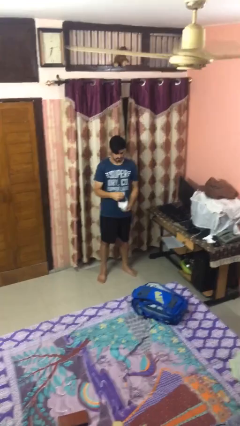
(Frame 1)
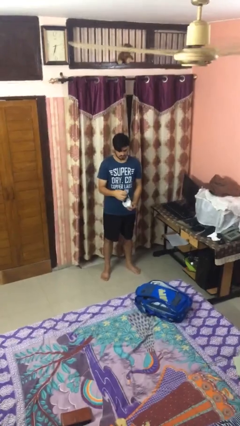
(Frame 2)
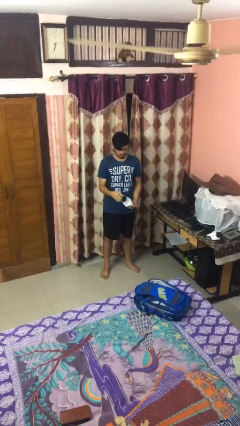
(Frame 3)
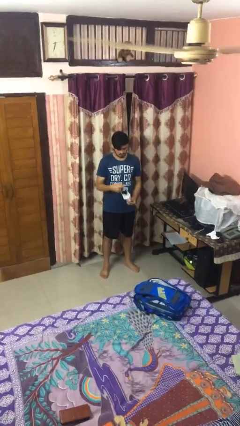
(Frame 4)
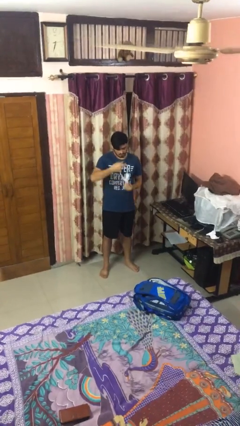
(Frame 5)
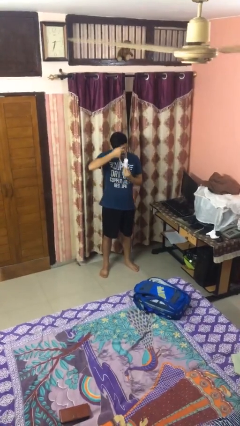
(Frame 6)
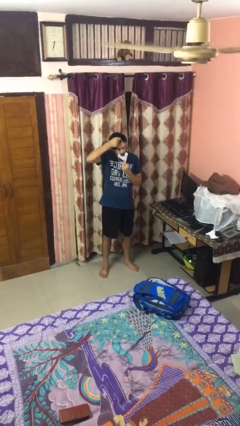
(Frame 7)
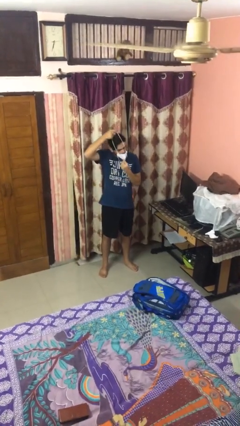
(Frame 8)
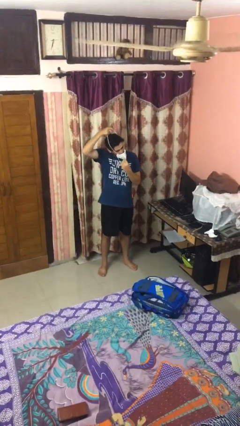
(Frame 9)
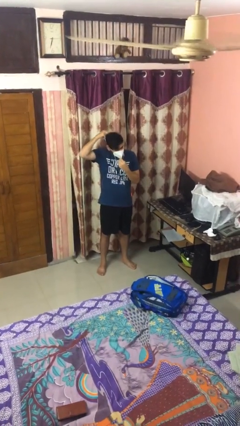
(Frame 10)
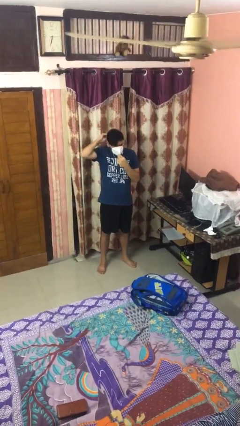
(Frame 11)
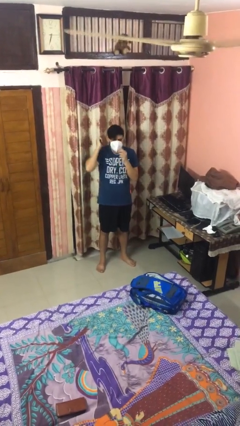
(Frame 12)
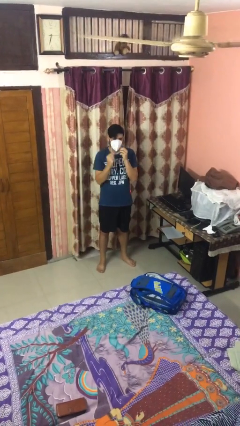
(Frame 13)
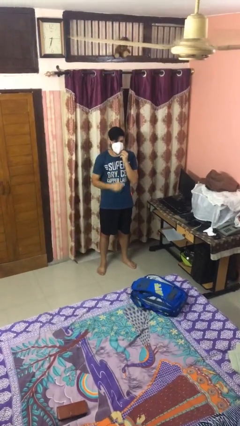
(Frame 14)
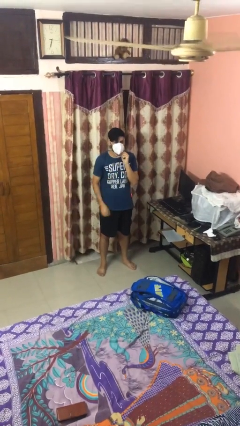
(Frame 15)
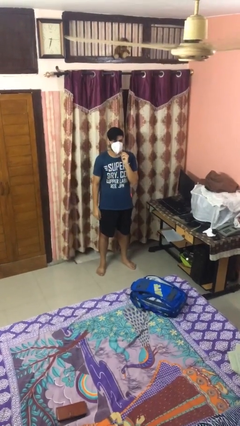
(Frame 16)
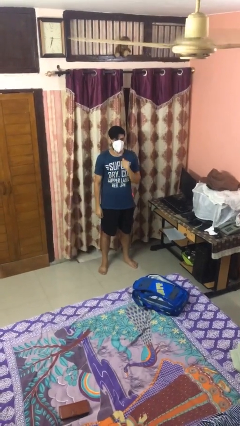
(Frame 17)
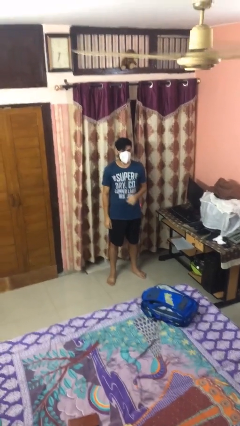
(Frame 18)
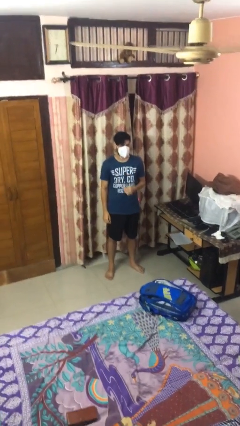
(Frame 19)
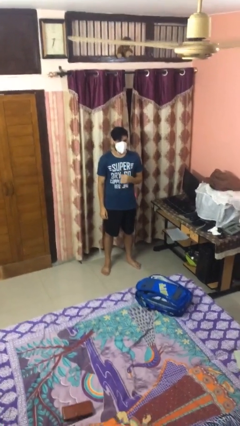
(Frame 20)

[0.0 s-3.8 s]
person puts on facemask

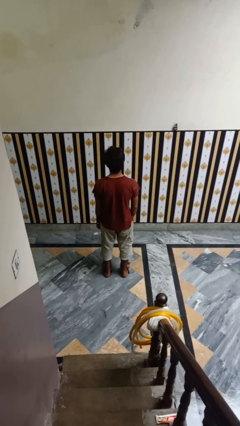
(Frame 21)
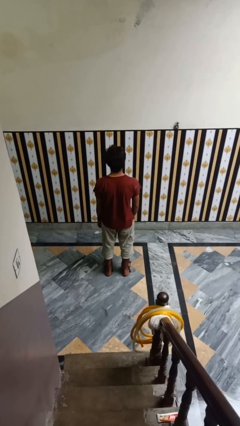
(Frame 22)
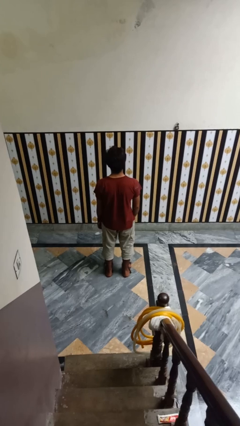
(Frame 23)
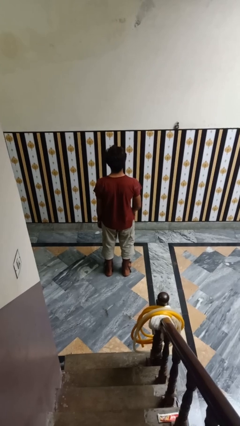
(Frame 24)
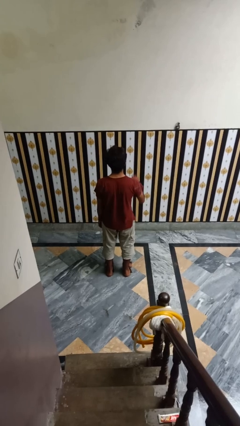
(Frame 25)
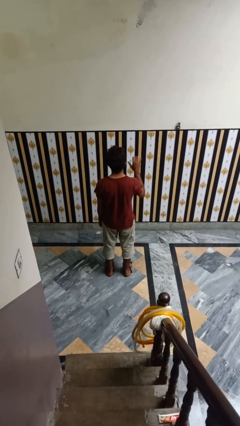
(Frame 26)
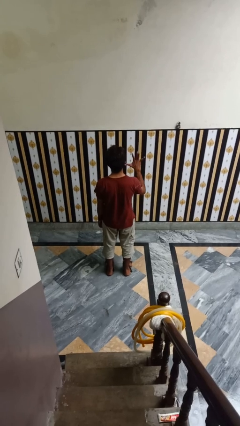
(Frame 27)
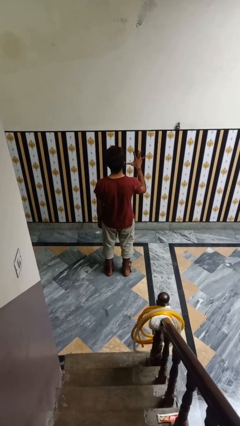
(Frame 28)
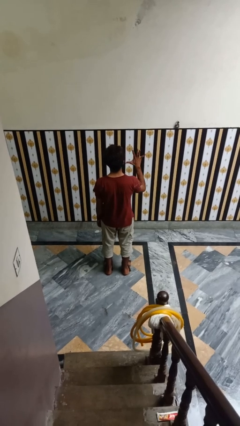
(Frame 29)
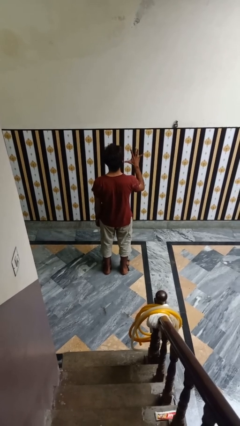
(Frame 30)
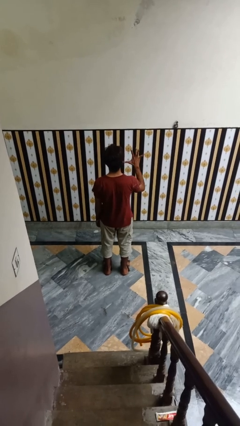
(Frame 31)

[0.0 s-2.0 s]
person gestures number five

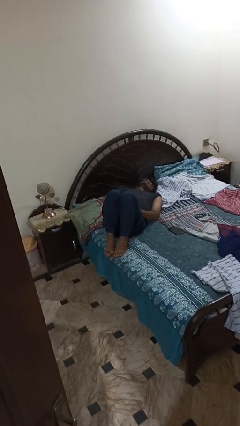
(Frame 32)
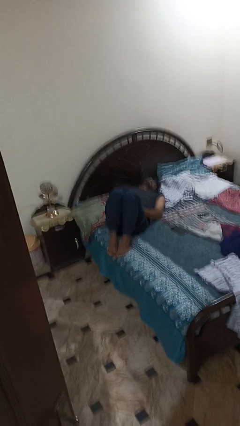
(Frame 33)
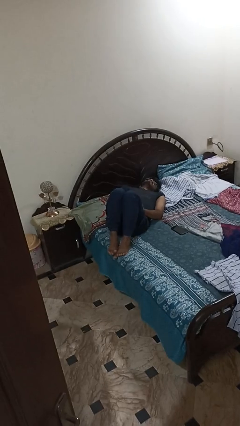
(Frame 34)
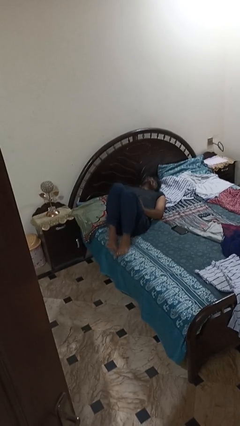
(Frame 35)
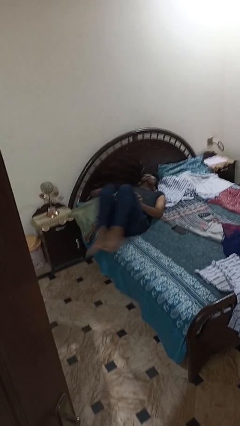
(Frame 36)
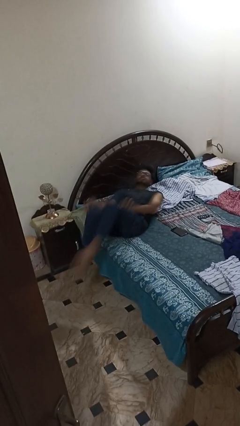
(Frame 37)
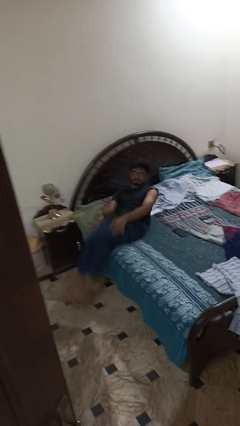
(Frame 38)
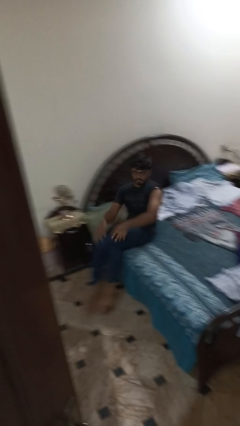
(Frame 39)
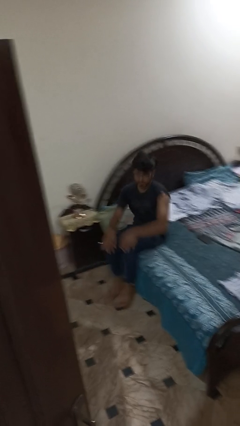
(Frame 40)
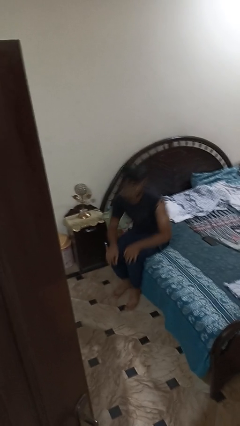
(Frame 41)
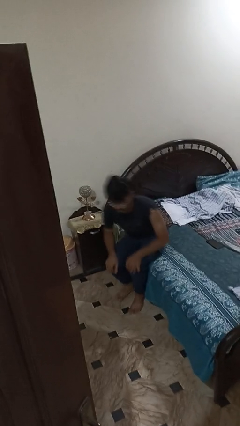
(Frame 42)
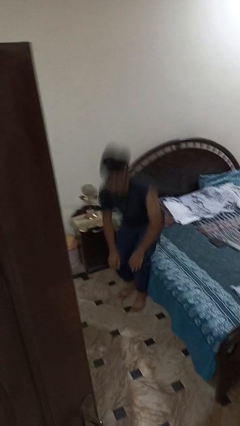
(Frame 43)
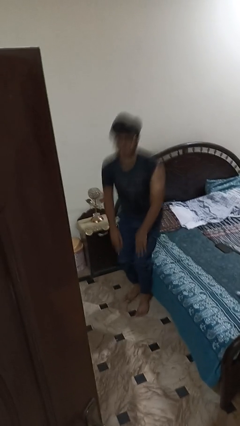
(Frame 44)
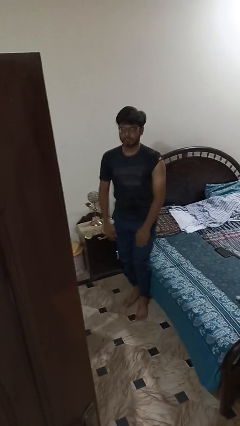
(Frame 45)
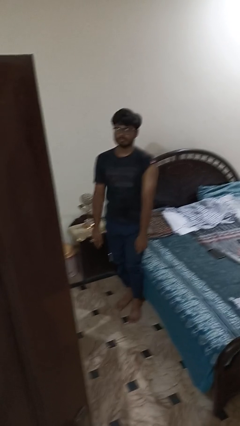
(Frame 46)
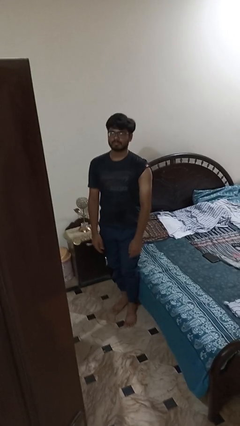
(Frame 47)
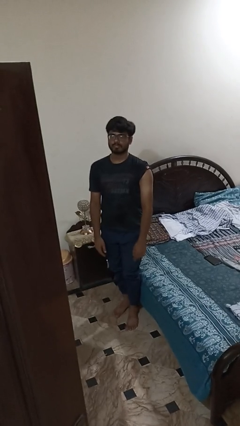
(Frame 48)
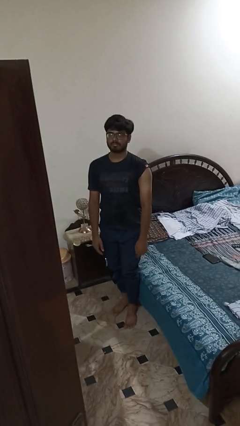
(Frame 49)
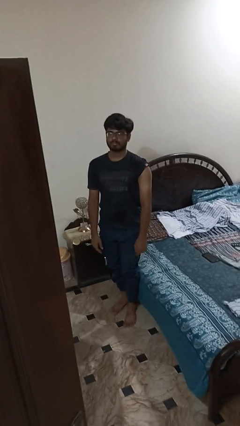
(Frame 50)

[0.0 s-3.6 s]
person stands up

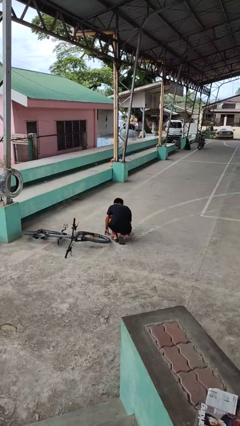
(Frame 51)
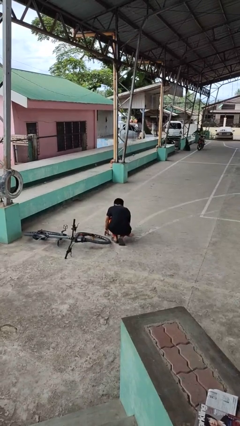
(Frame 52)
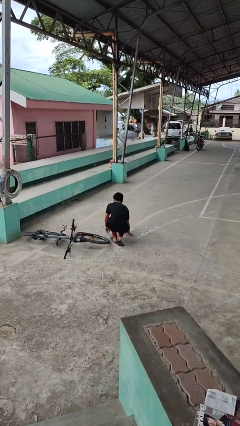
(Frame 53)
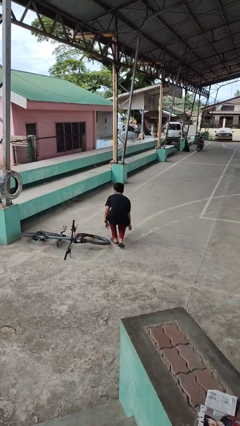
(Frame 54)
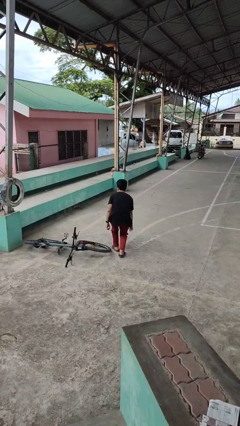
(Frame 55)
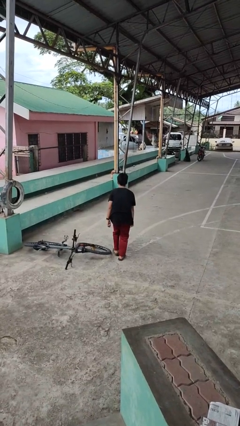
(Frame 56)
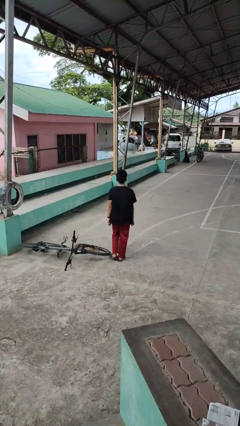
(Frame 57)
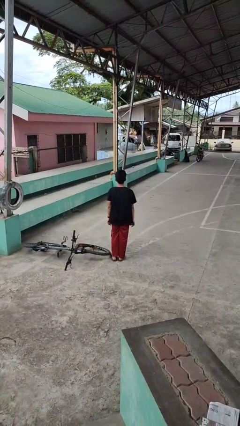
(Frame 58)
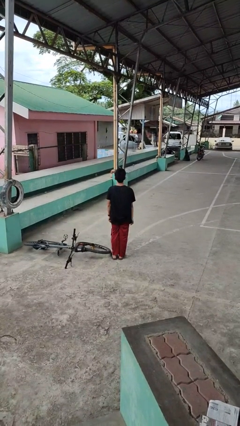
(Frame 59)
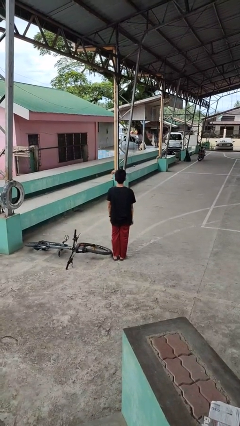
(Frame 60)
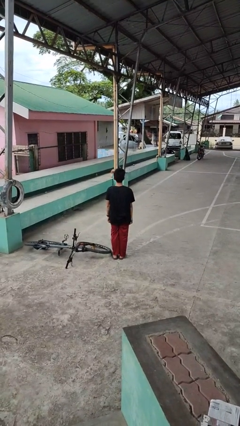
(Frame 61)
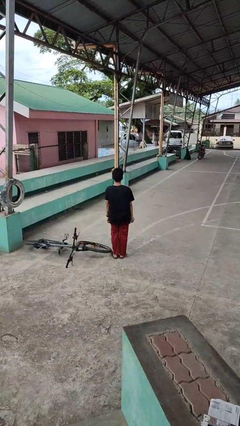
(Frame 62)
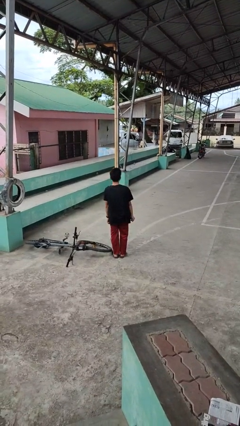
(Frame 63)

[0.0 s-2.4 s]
person stands up from floor

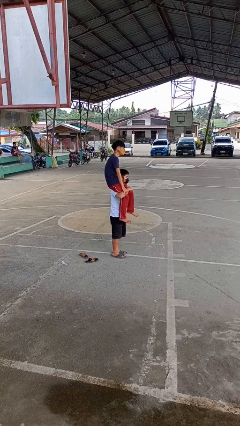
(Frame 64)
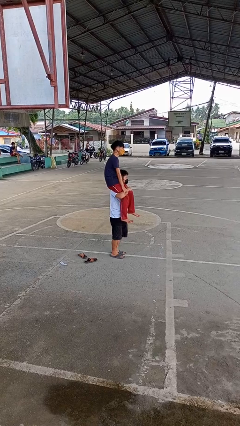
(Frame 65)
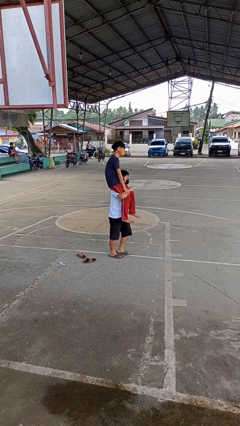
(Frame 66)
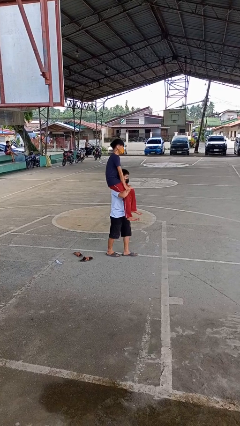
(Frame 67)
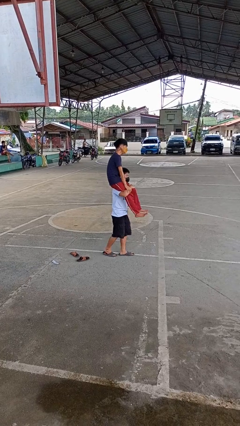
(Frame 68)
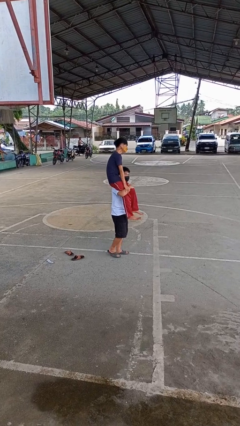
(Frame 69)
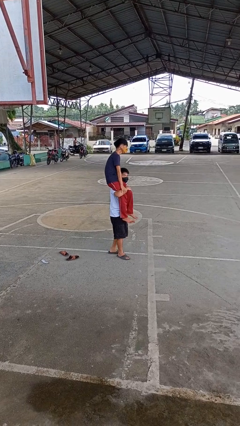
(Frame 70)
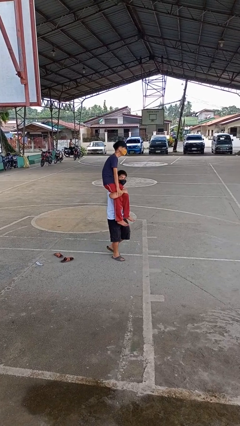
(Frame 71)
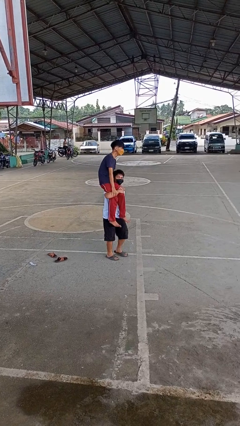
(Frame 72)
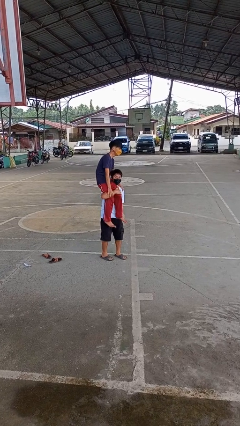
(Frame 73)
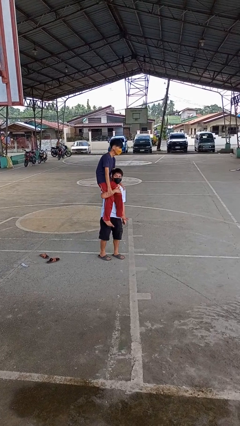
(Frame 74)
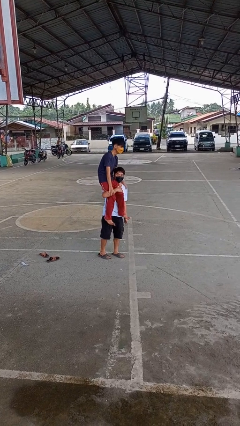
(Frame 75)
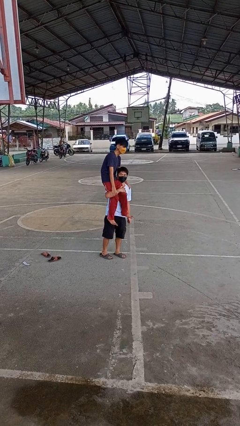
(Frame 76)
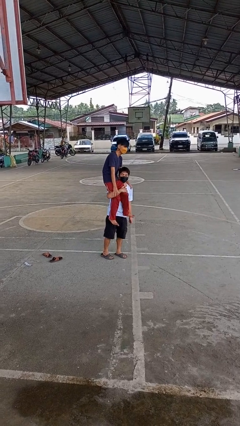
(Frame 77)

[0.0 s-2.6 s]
person carries person on shoulders

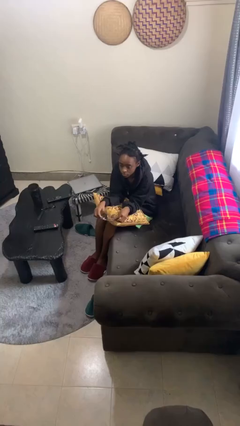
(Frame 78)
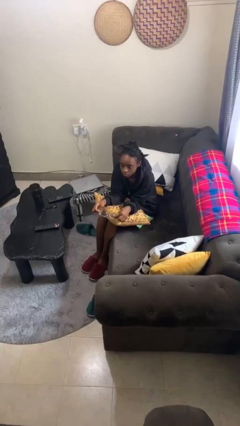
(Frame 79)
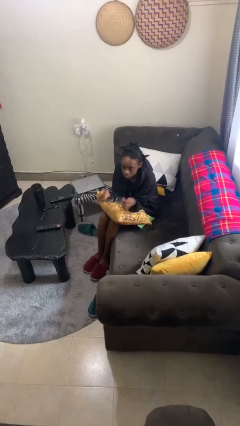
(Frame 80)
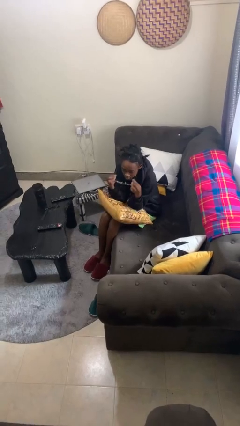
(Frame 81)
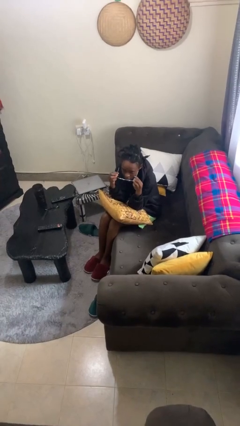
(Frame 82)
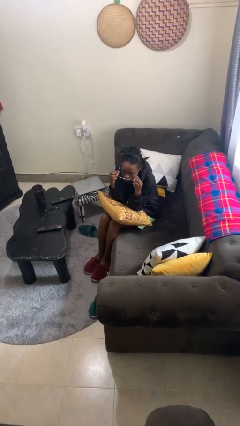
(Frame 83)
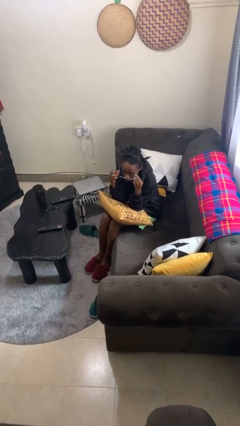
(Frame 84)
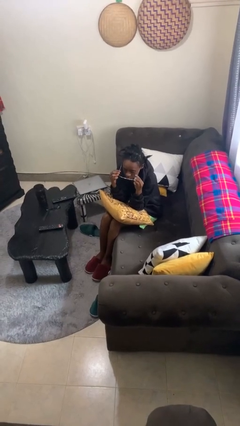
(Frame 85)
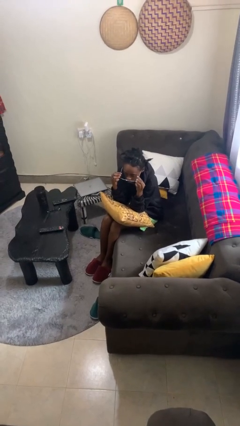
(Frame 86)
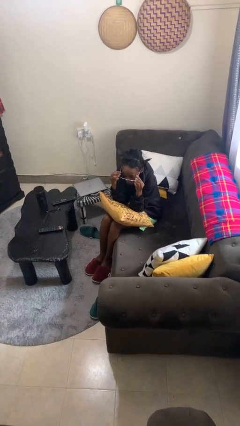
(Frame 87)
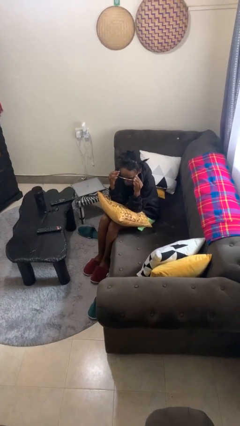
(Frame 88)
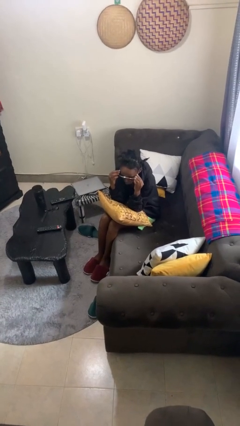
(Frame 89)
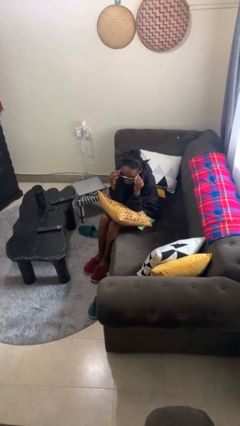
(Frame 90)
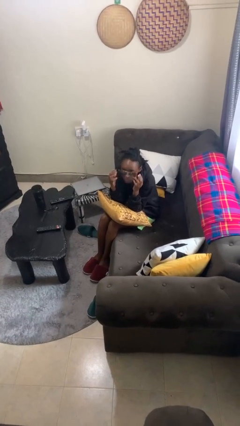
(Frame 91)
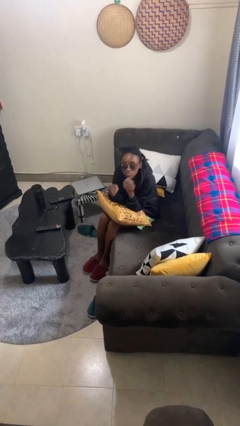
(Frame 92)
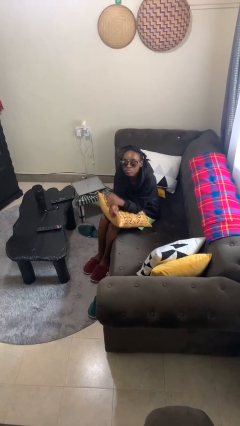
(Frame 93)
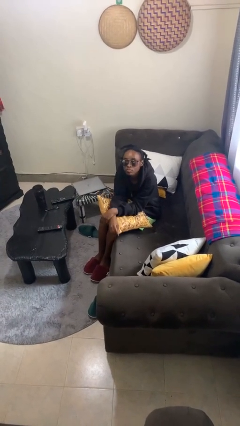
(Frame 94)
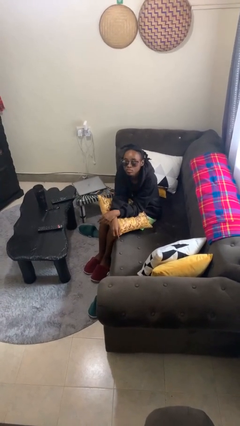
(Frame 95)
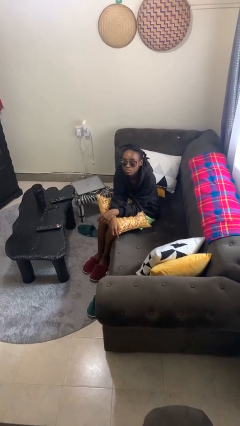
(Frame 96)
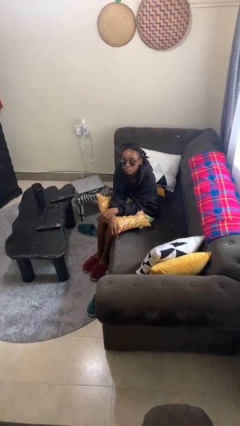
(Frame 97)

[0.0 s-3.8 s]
person puts on sunglasses
